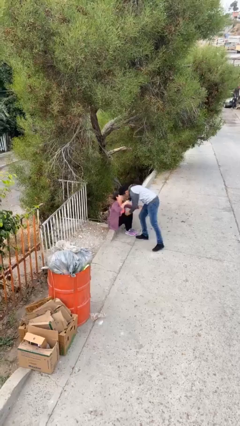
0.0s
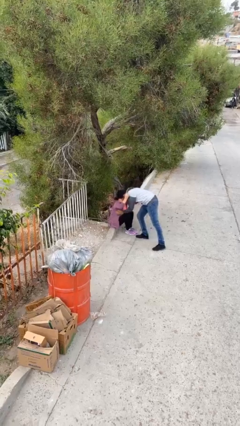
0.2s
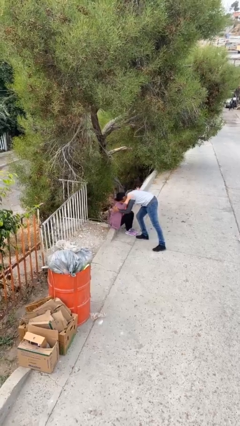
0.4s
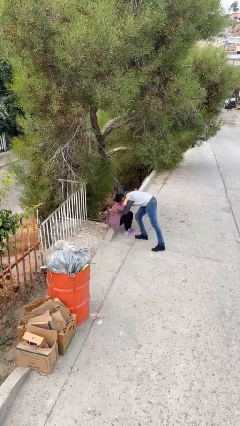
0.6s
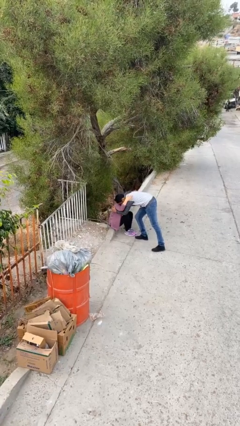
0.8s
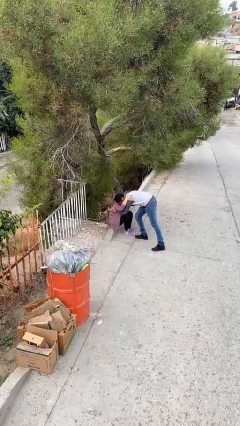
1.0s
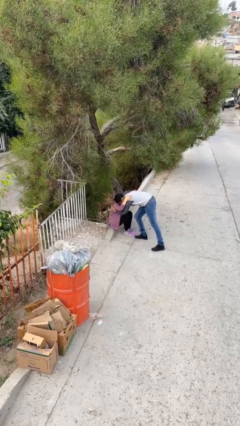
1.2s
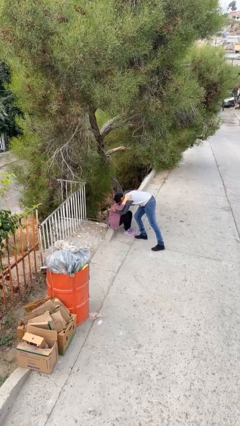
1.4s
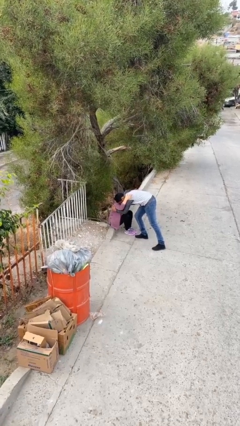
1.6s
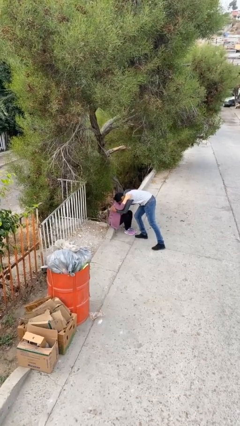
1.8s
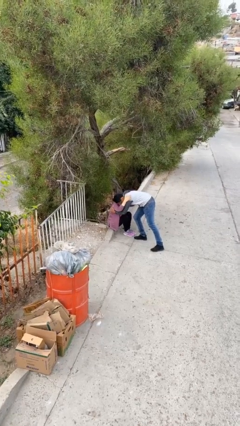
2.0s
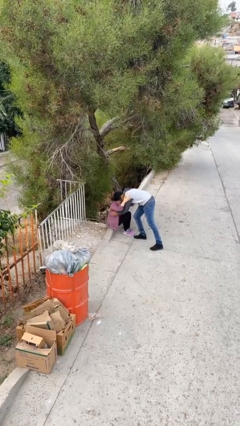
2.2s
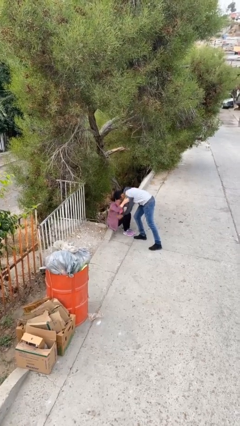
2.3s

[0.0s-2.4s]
person embraces person

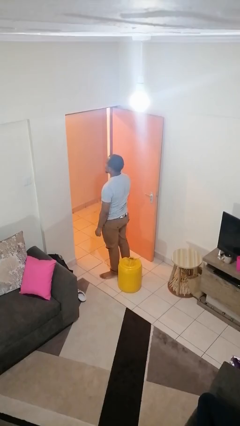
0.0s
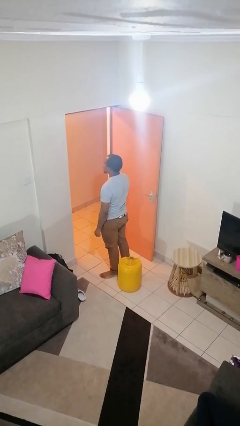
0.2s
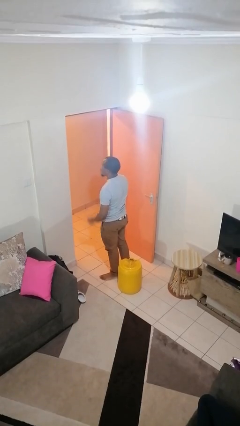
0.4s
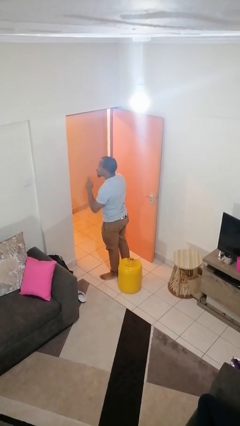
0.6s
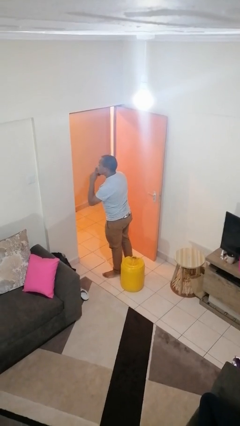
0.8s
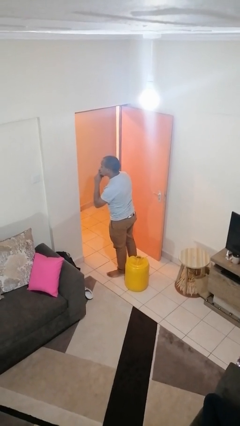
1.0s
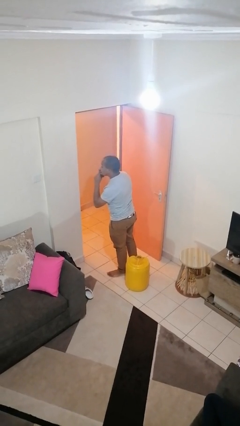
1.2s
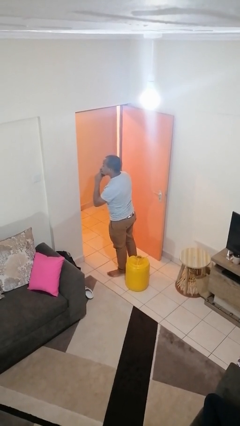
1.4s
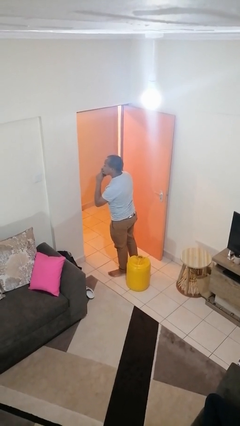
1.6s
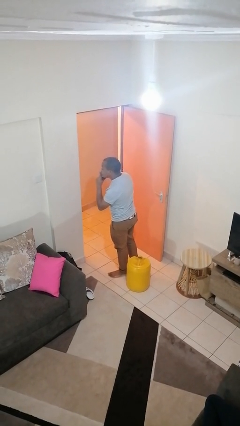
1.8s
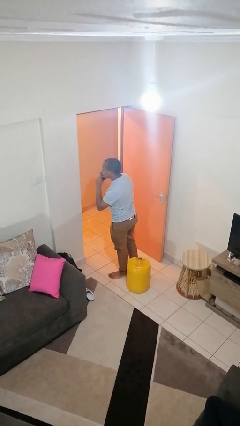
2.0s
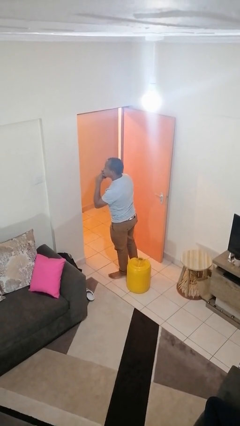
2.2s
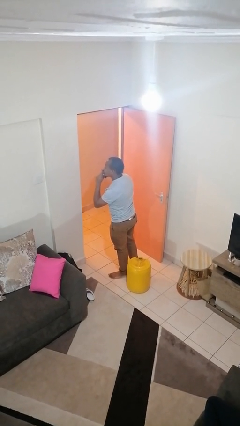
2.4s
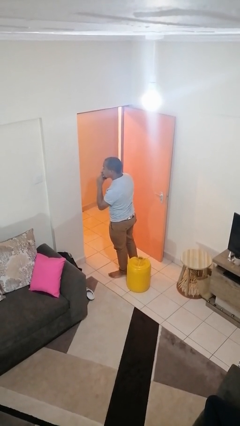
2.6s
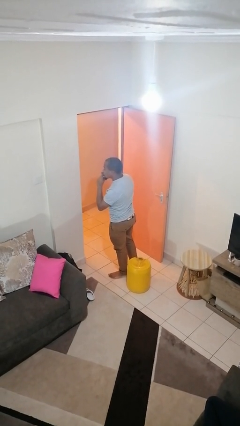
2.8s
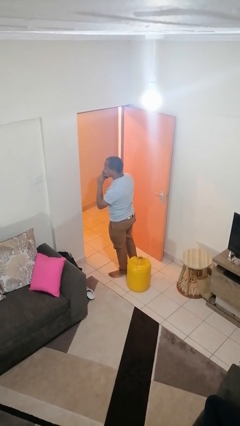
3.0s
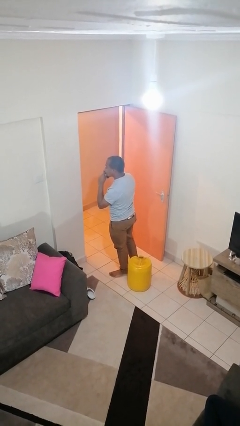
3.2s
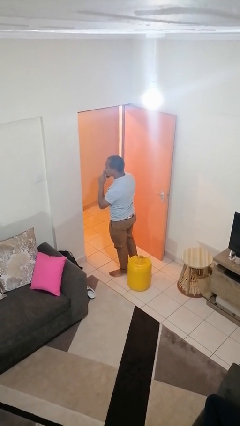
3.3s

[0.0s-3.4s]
person gestures be quiet

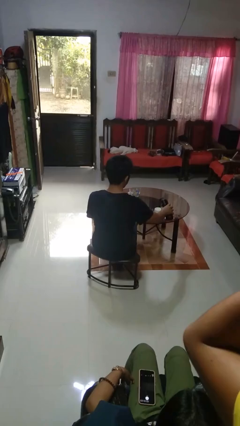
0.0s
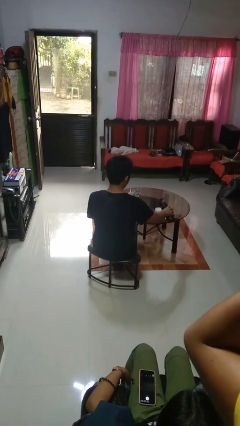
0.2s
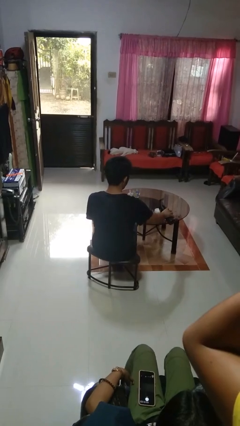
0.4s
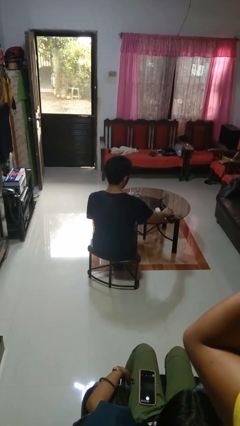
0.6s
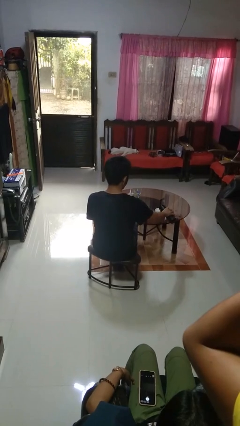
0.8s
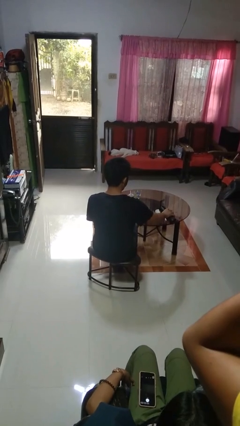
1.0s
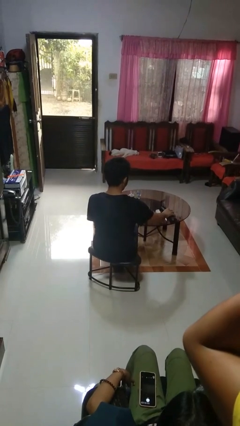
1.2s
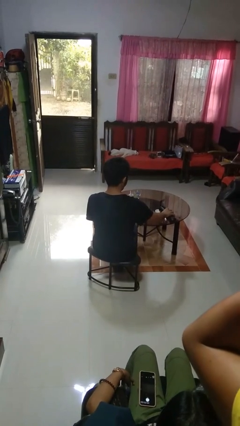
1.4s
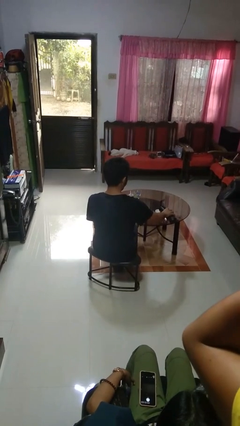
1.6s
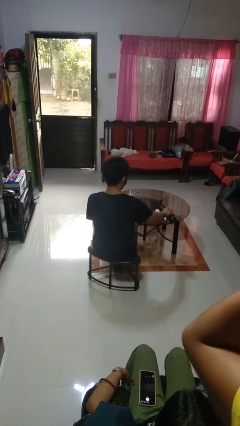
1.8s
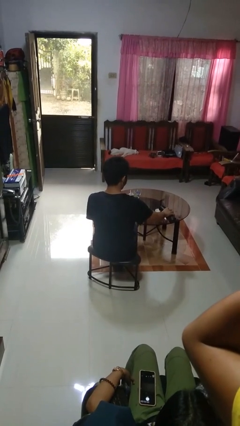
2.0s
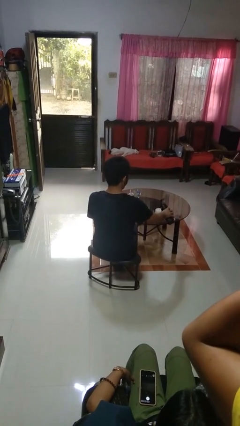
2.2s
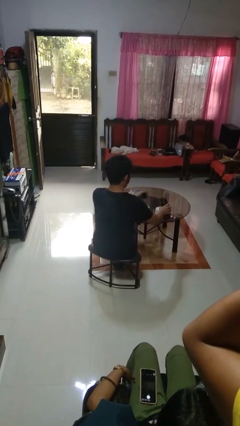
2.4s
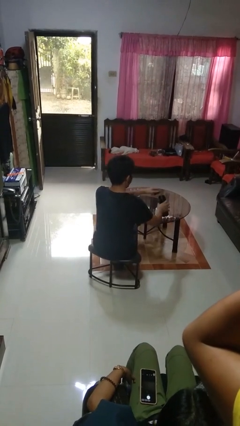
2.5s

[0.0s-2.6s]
person pours liquid into cup

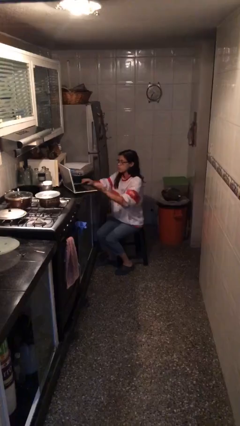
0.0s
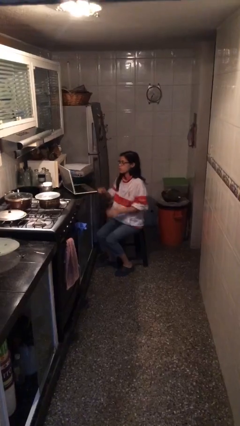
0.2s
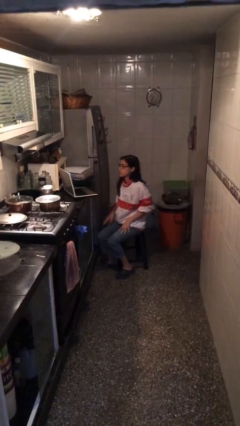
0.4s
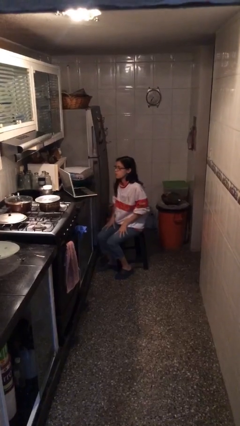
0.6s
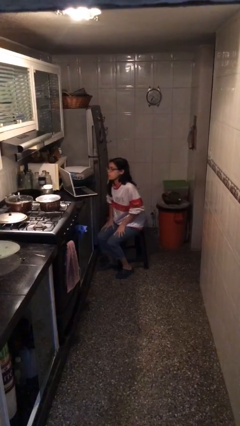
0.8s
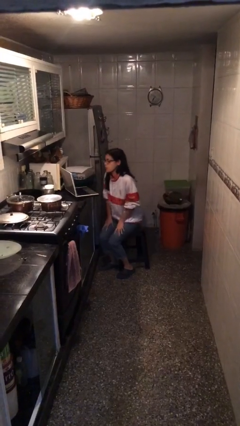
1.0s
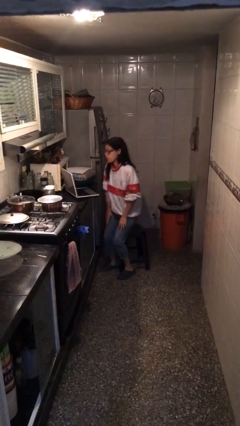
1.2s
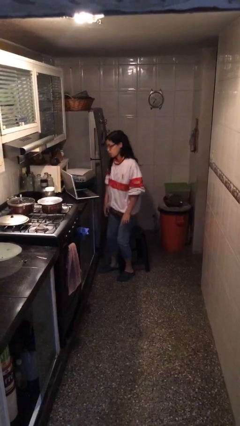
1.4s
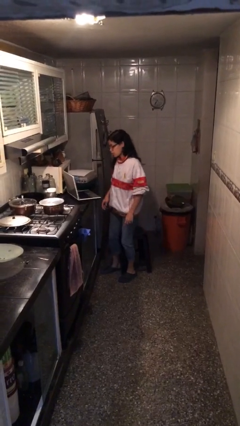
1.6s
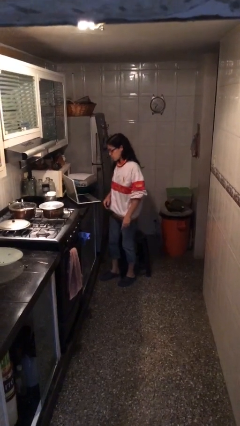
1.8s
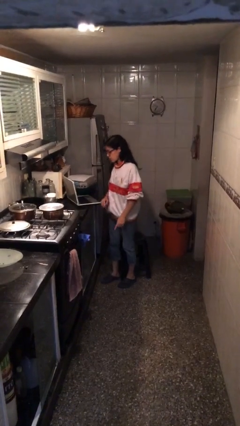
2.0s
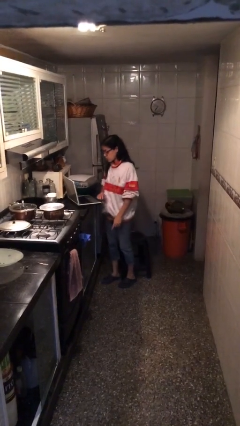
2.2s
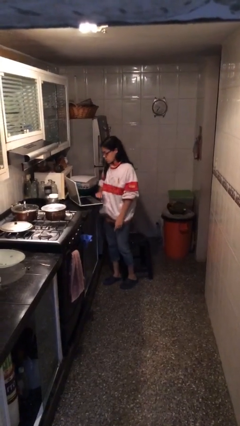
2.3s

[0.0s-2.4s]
person stands up

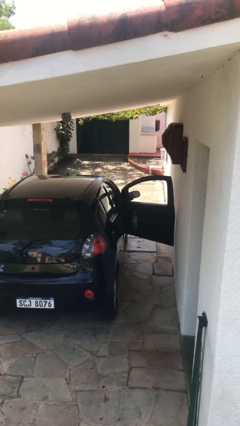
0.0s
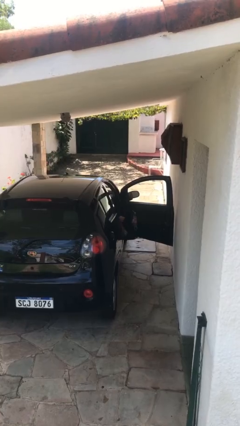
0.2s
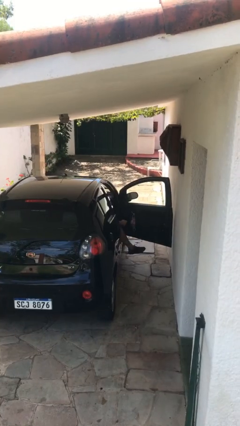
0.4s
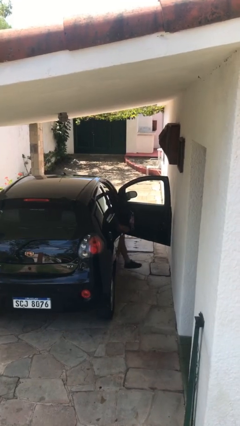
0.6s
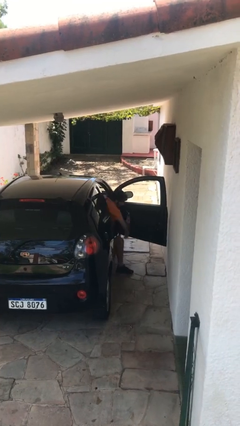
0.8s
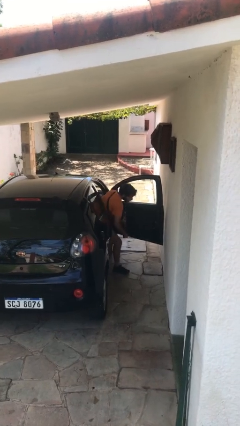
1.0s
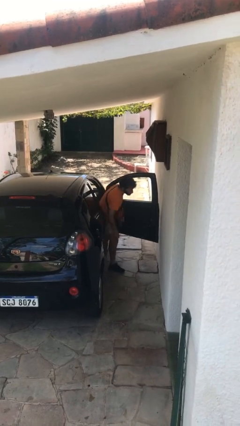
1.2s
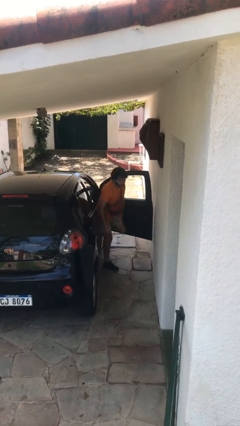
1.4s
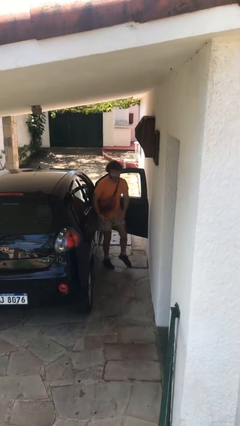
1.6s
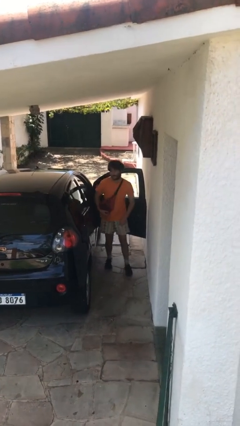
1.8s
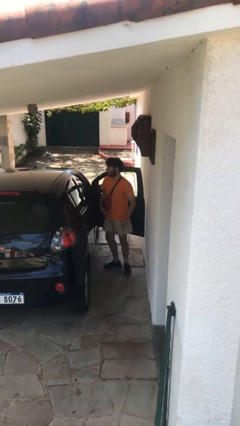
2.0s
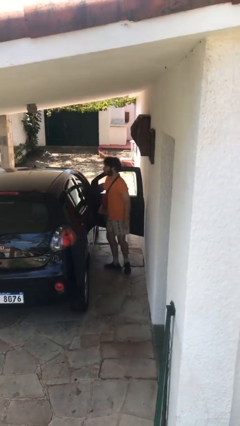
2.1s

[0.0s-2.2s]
person exits car

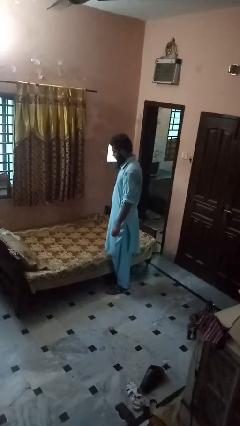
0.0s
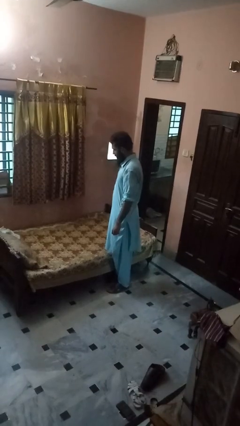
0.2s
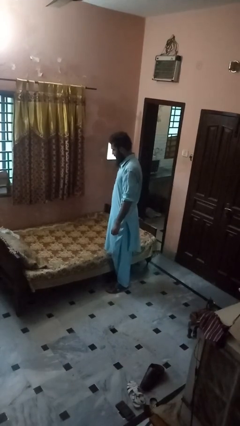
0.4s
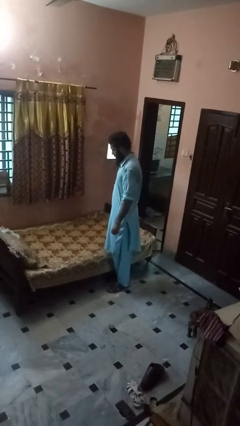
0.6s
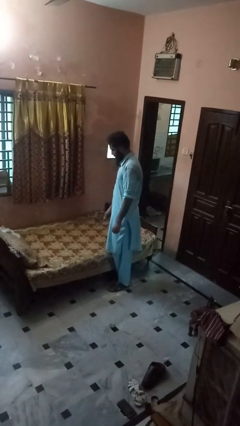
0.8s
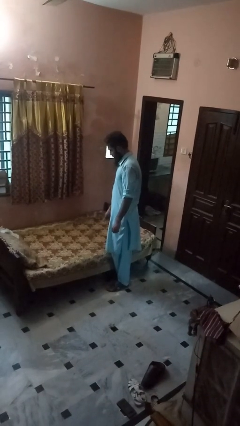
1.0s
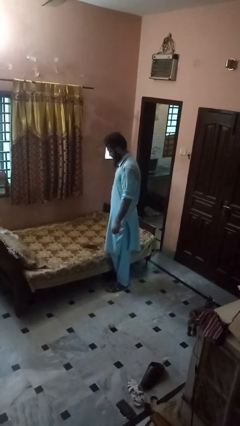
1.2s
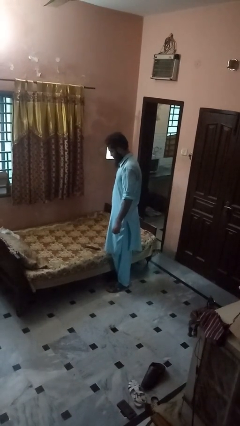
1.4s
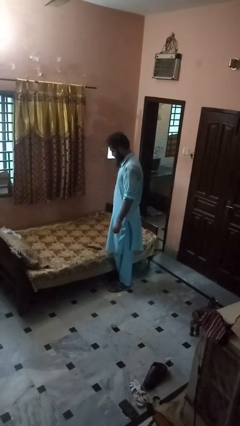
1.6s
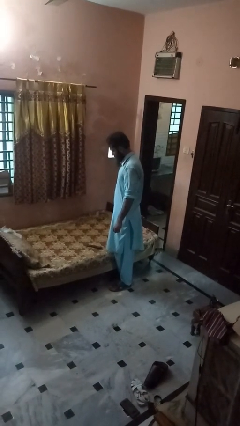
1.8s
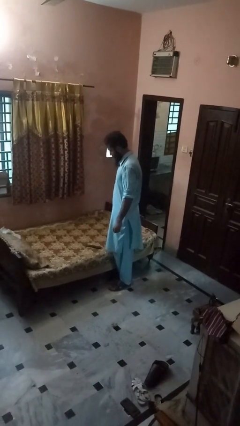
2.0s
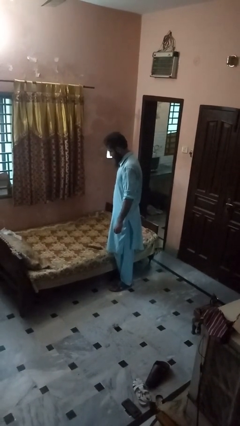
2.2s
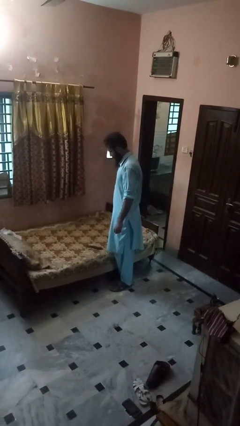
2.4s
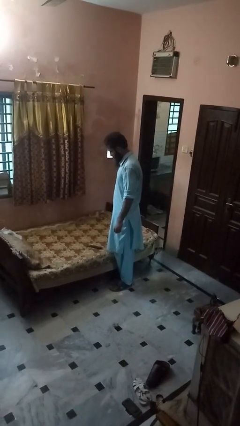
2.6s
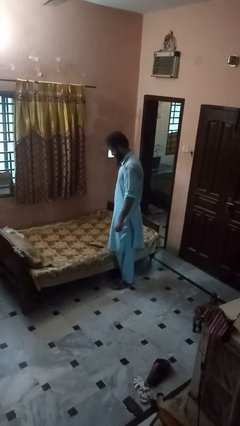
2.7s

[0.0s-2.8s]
person puts down object on bed

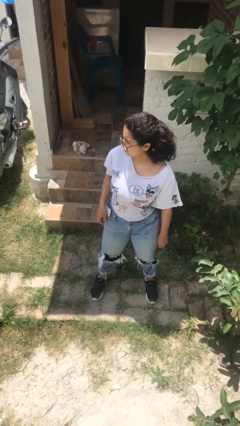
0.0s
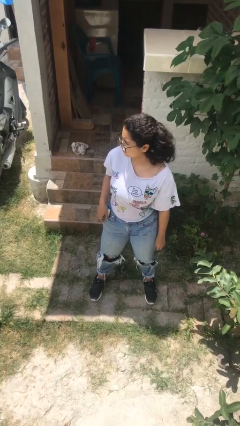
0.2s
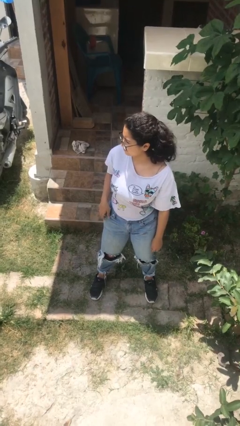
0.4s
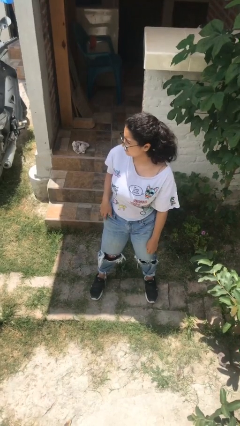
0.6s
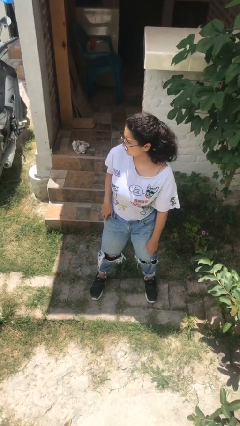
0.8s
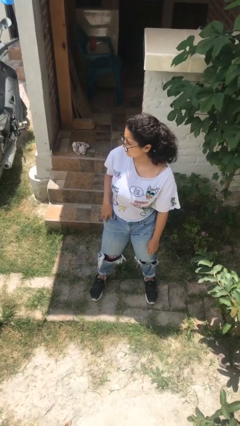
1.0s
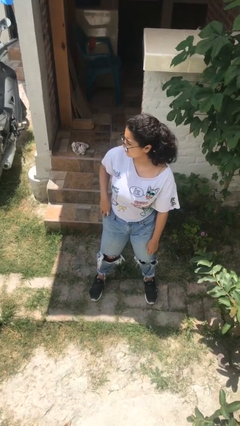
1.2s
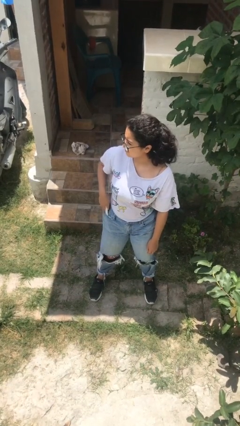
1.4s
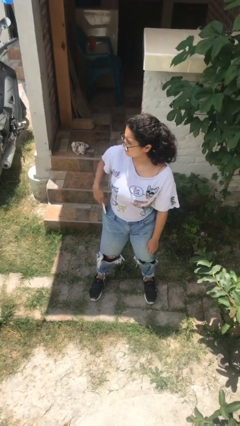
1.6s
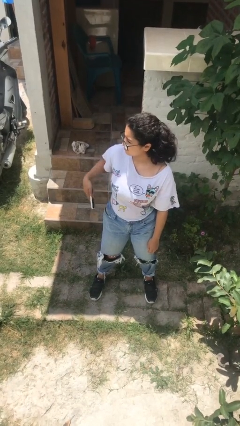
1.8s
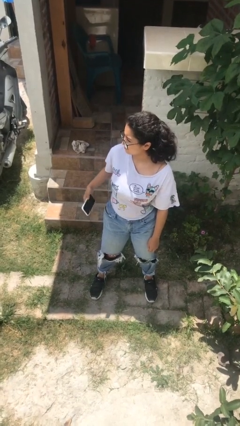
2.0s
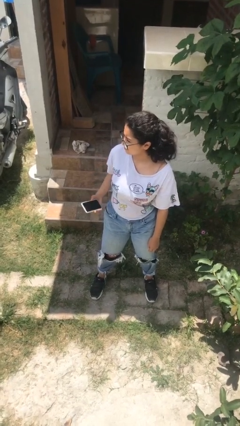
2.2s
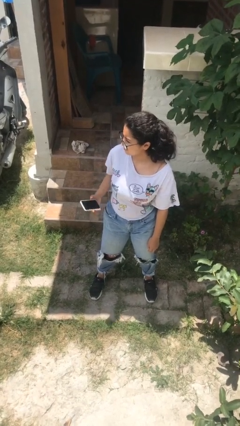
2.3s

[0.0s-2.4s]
person takes phone from pocket
